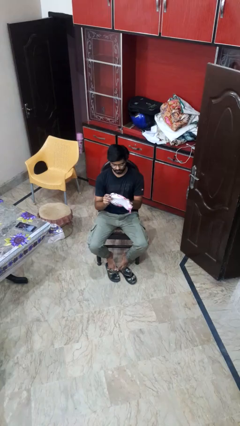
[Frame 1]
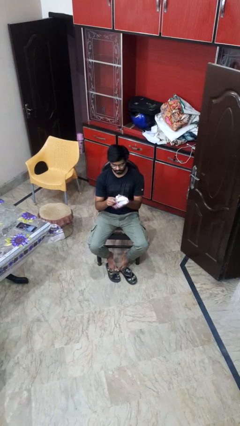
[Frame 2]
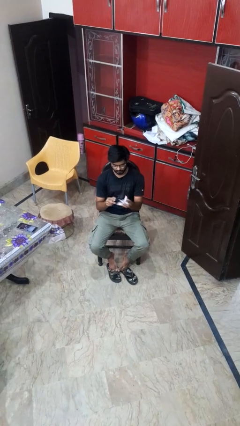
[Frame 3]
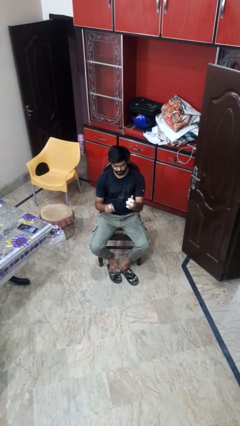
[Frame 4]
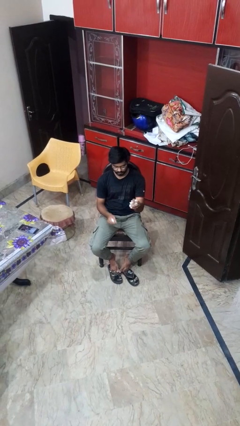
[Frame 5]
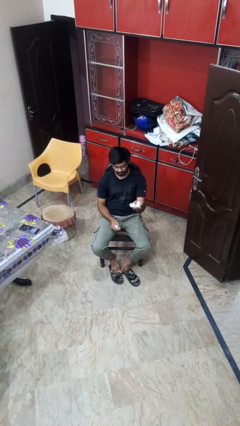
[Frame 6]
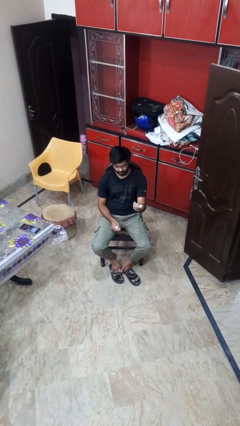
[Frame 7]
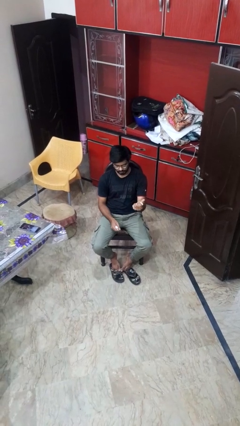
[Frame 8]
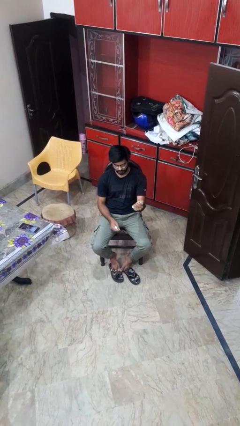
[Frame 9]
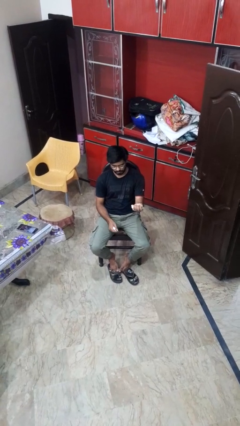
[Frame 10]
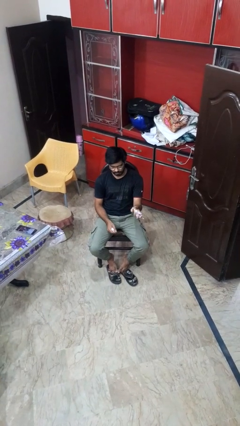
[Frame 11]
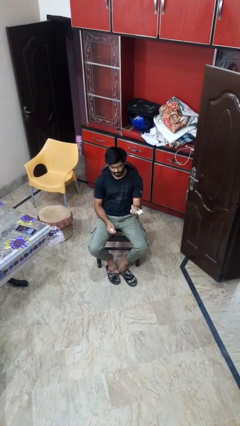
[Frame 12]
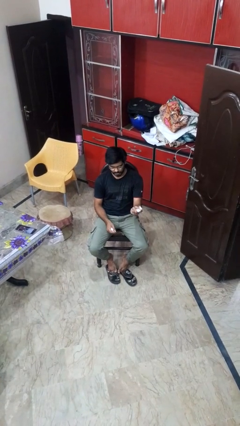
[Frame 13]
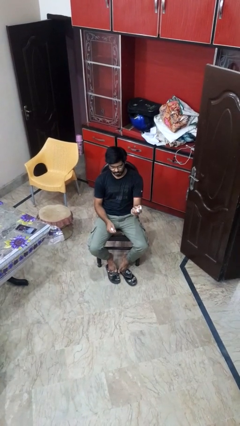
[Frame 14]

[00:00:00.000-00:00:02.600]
person crumples paper

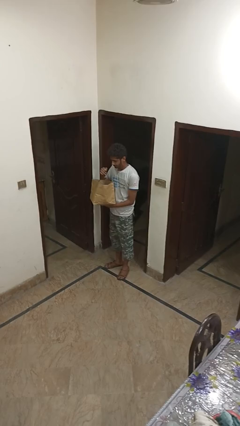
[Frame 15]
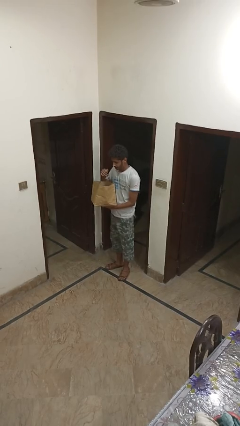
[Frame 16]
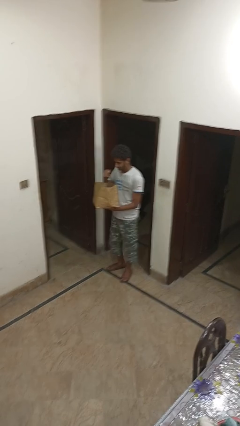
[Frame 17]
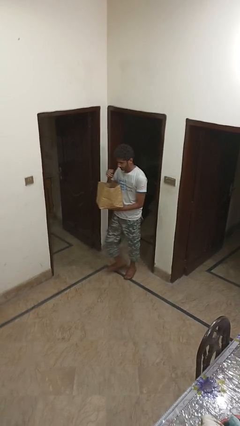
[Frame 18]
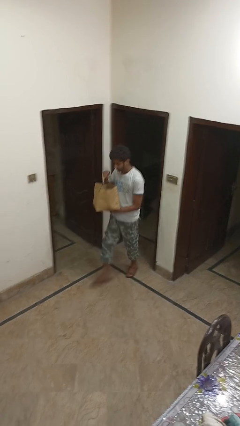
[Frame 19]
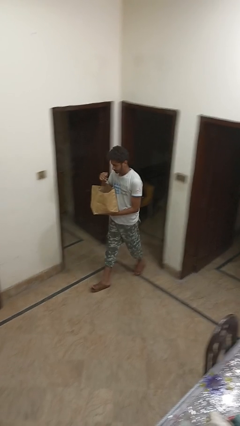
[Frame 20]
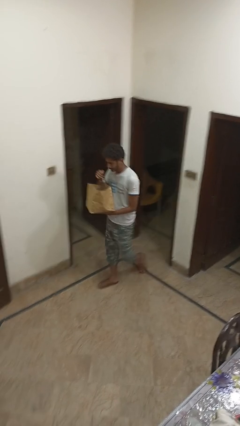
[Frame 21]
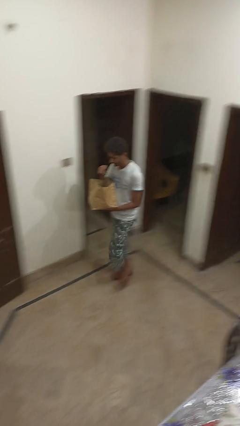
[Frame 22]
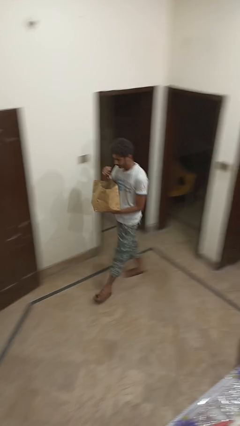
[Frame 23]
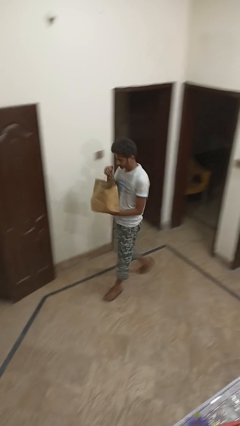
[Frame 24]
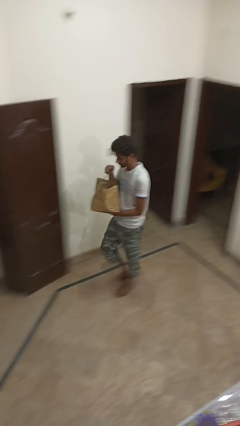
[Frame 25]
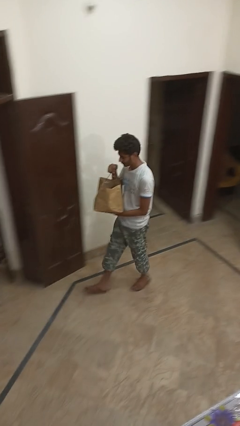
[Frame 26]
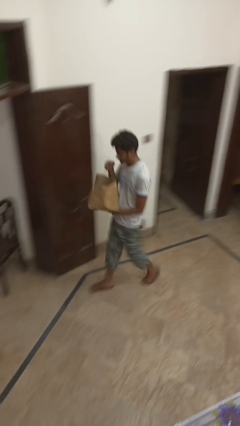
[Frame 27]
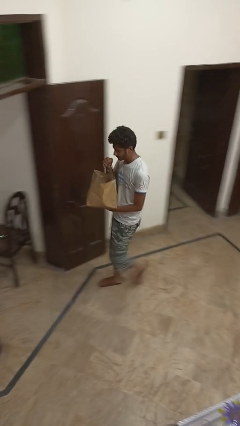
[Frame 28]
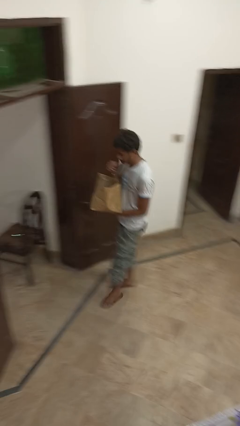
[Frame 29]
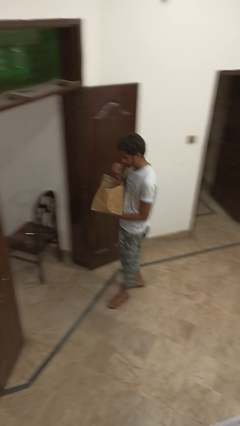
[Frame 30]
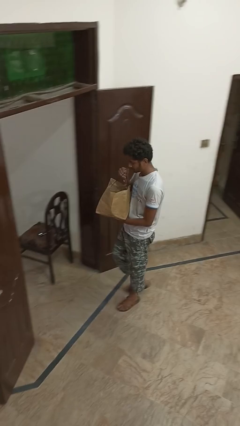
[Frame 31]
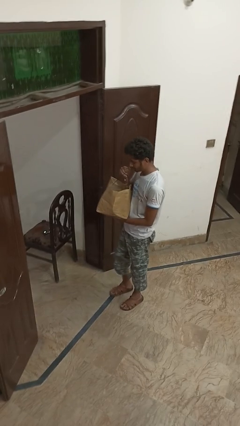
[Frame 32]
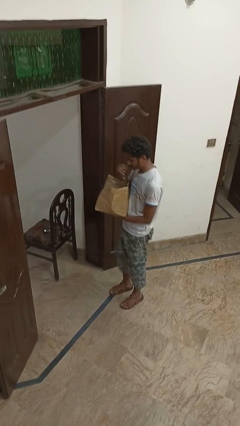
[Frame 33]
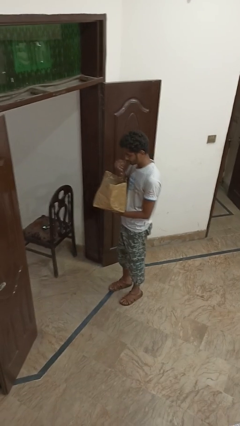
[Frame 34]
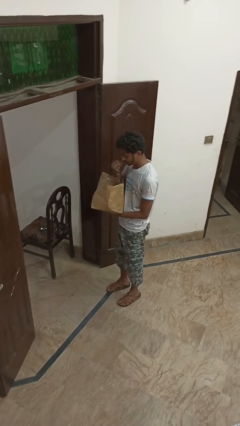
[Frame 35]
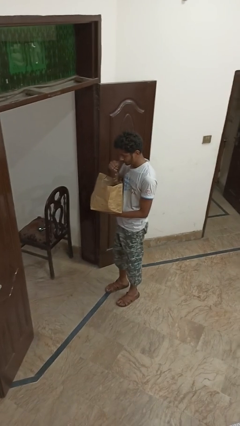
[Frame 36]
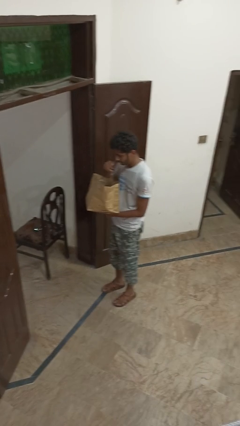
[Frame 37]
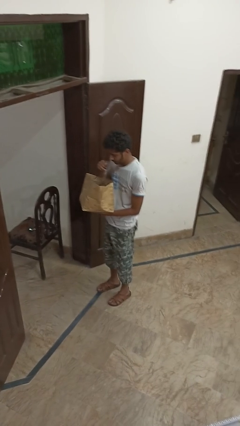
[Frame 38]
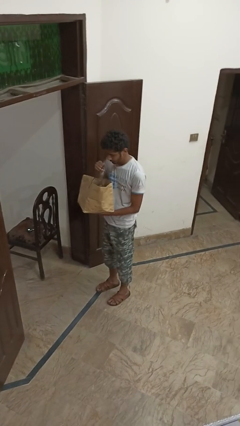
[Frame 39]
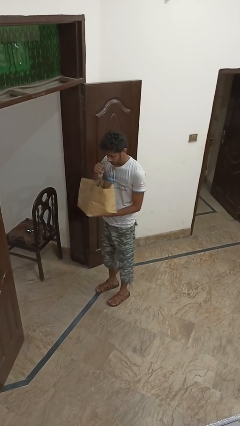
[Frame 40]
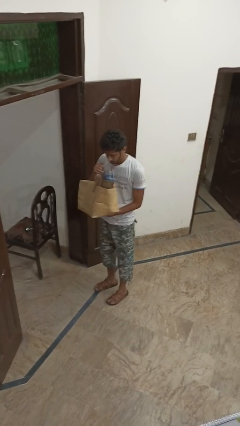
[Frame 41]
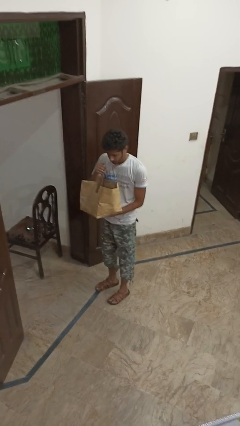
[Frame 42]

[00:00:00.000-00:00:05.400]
person carries groceries

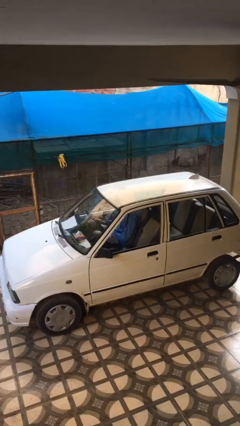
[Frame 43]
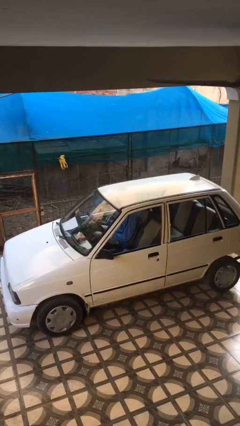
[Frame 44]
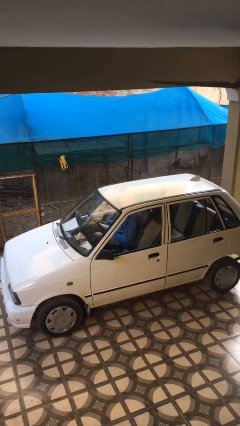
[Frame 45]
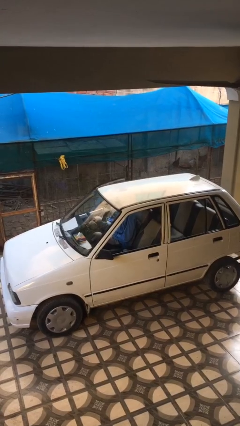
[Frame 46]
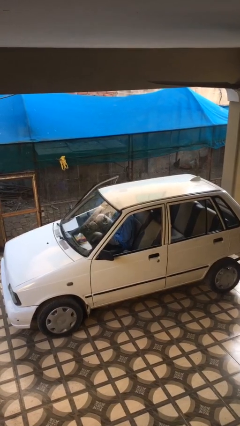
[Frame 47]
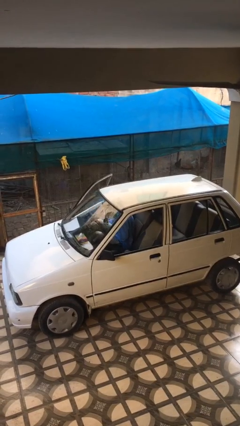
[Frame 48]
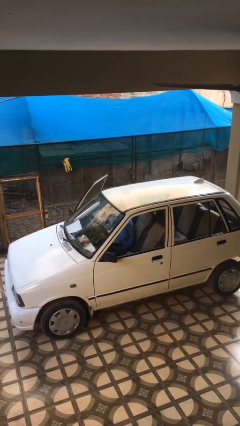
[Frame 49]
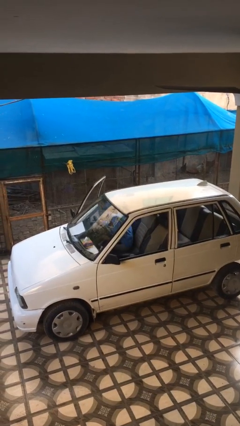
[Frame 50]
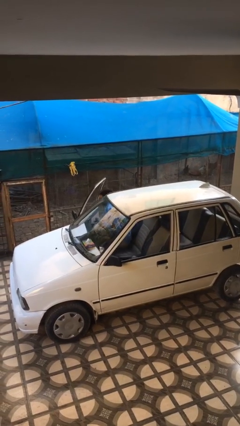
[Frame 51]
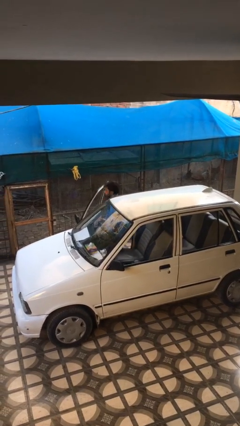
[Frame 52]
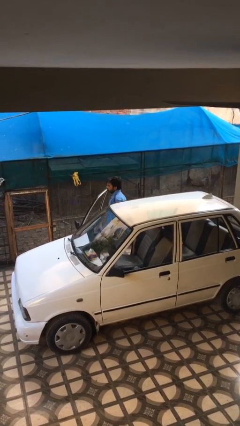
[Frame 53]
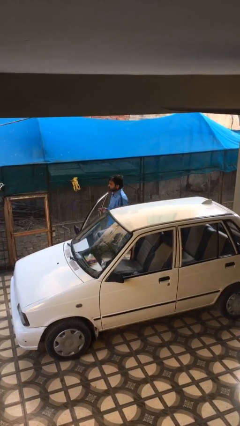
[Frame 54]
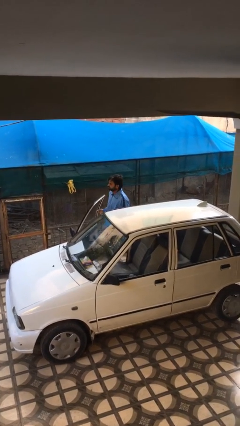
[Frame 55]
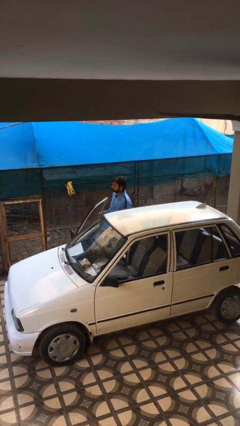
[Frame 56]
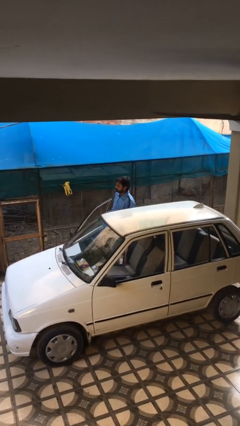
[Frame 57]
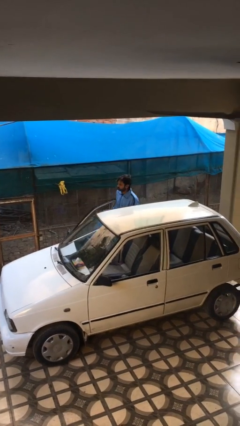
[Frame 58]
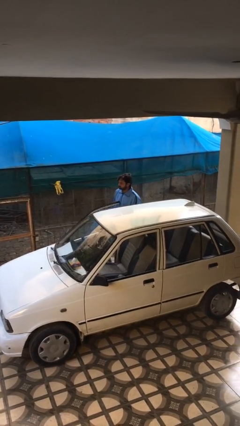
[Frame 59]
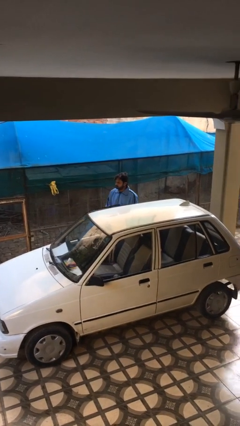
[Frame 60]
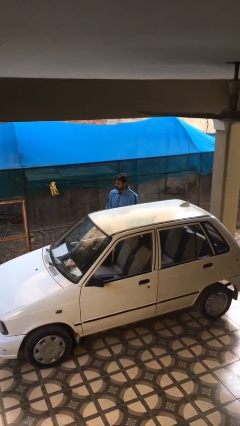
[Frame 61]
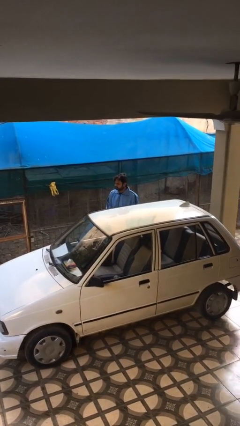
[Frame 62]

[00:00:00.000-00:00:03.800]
person exits car

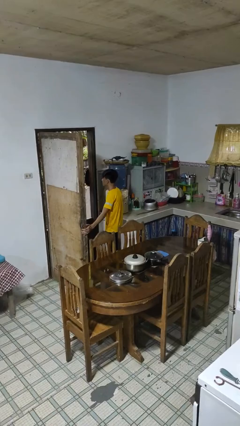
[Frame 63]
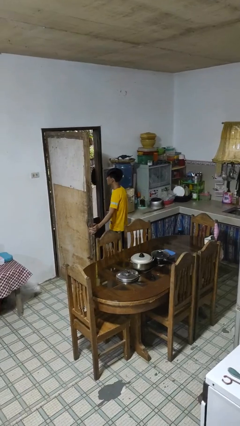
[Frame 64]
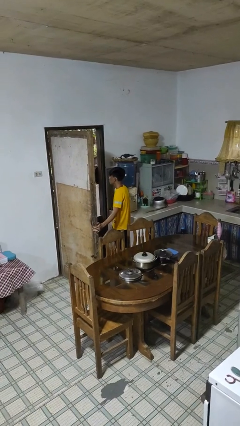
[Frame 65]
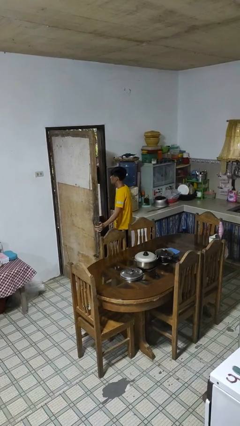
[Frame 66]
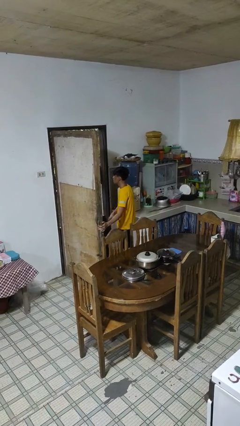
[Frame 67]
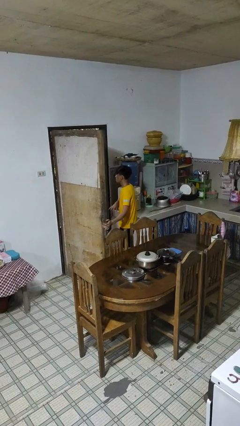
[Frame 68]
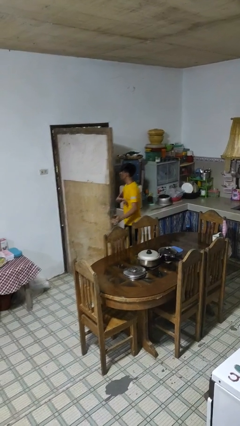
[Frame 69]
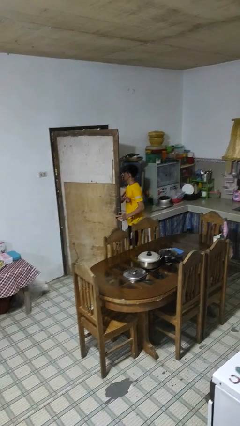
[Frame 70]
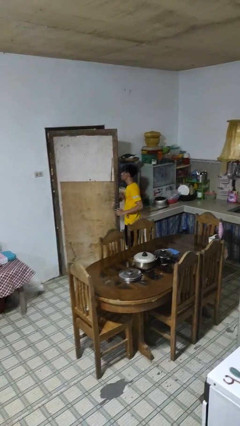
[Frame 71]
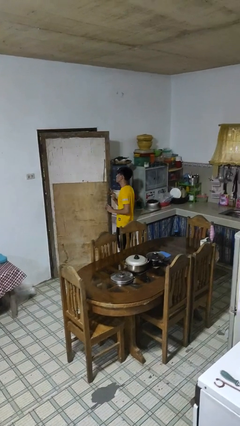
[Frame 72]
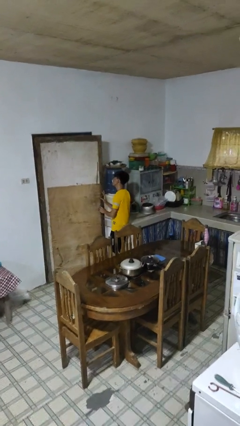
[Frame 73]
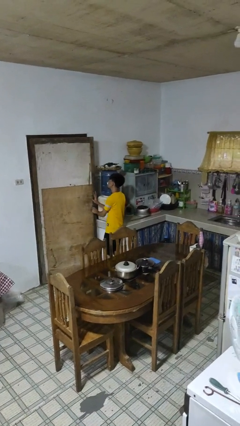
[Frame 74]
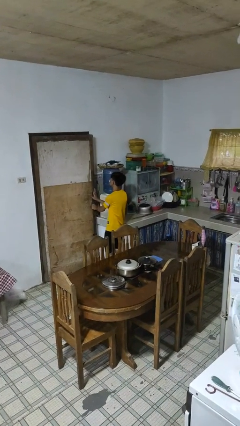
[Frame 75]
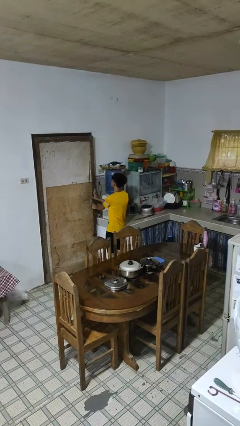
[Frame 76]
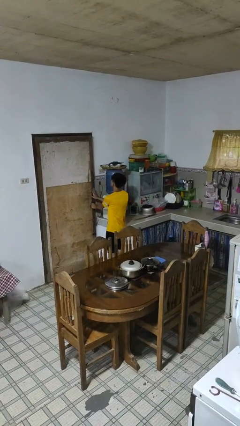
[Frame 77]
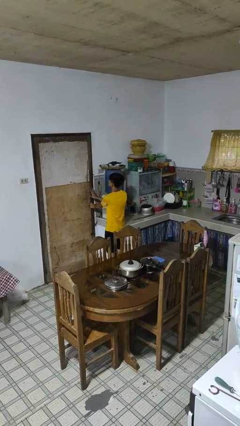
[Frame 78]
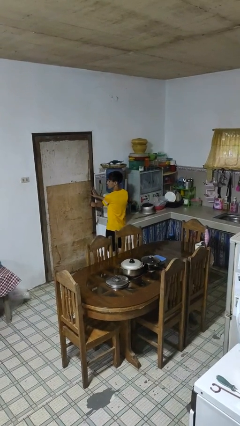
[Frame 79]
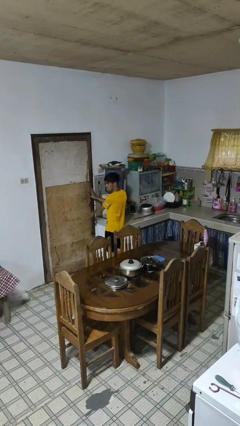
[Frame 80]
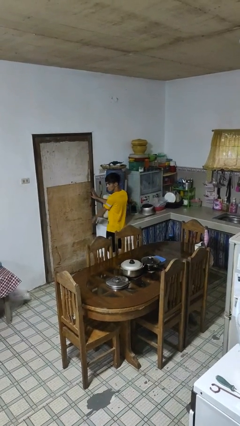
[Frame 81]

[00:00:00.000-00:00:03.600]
person closes facility door

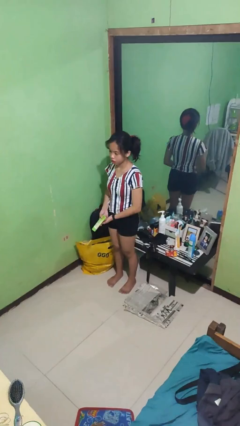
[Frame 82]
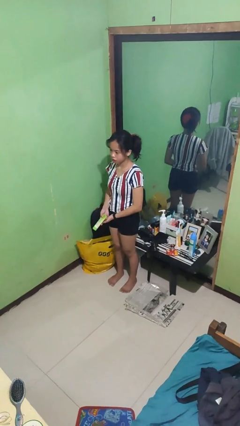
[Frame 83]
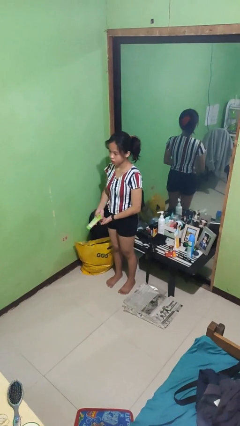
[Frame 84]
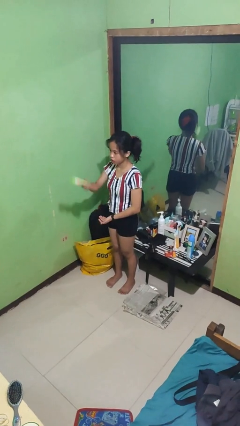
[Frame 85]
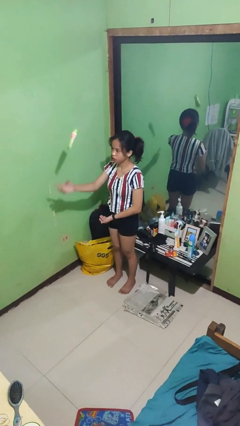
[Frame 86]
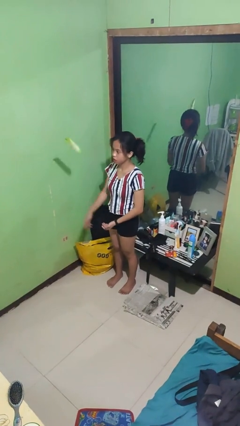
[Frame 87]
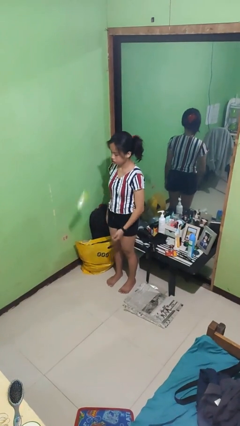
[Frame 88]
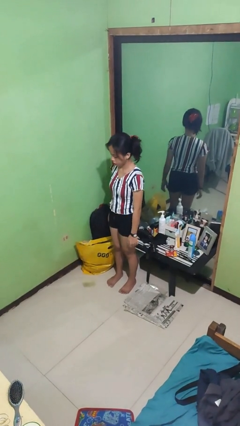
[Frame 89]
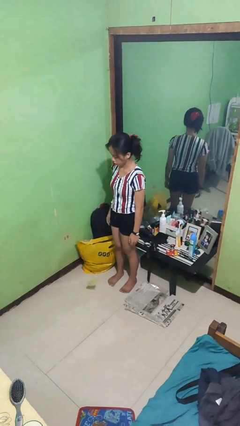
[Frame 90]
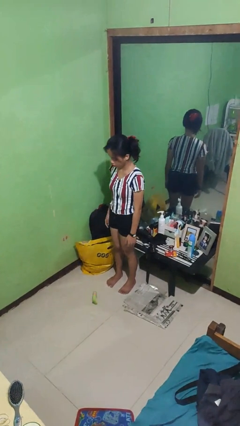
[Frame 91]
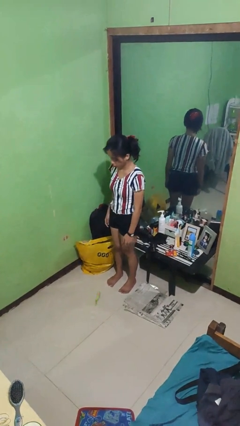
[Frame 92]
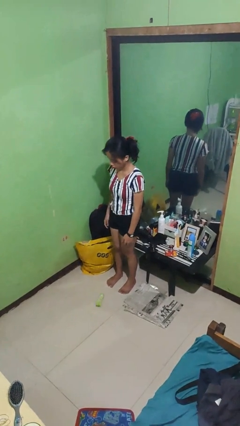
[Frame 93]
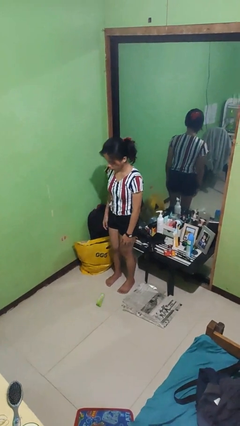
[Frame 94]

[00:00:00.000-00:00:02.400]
person throws object into air
